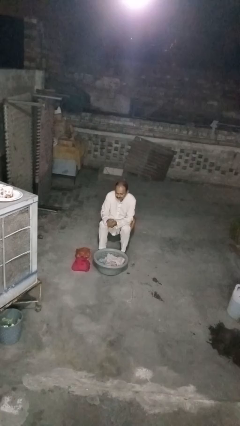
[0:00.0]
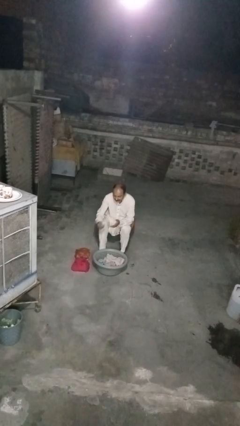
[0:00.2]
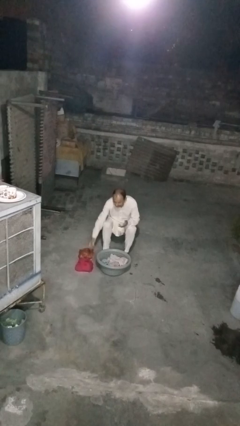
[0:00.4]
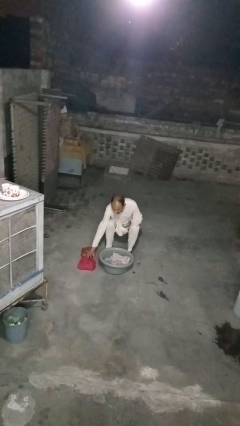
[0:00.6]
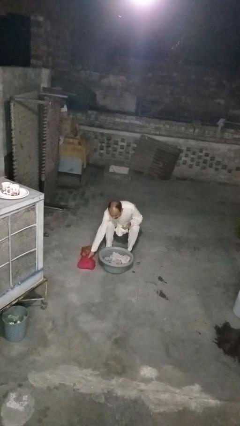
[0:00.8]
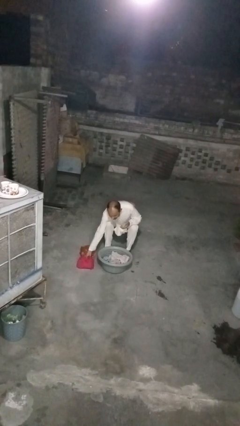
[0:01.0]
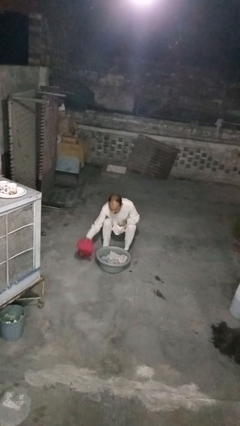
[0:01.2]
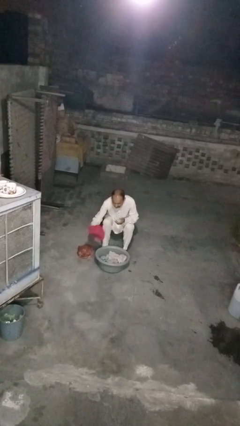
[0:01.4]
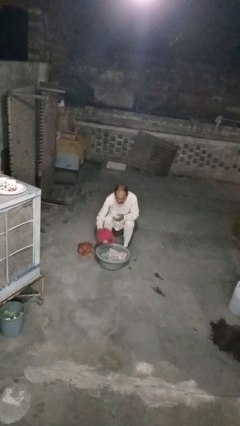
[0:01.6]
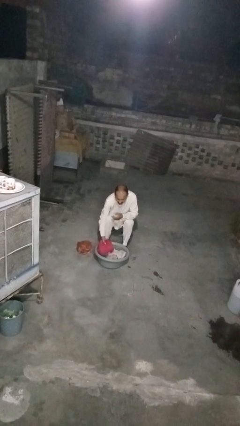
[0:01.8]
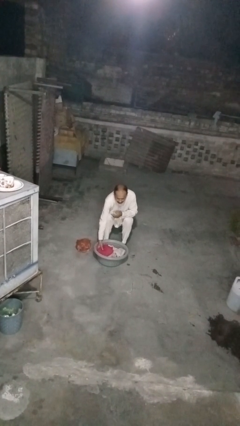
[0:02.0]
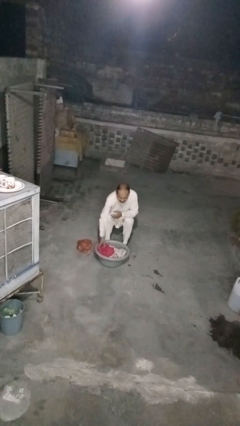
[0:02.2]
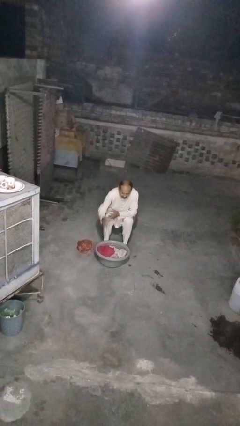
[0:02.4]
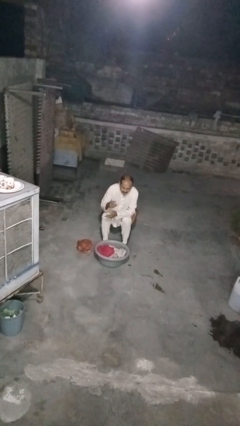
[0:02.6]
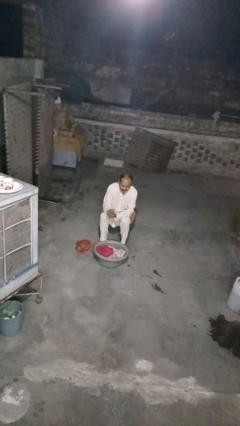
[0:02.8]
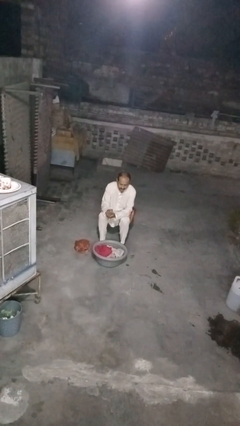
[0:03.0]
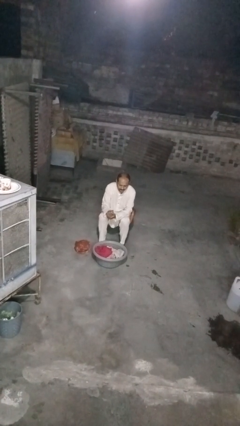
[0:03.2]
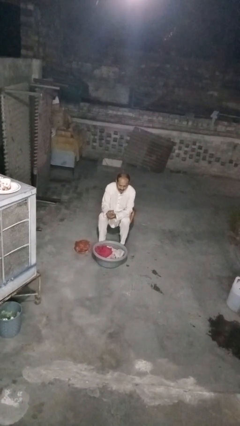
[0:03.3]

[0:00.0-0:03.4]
person puts object into basket

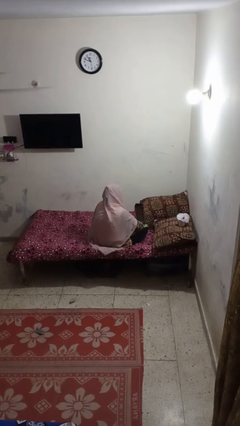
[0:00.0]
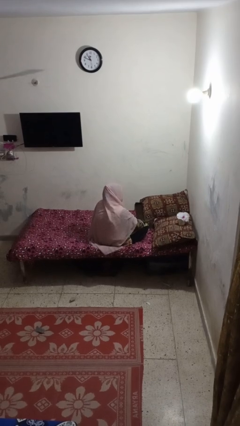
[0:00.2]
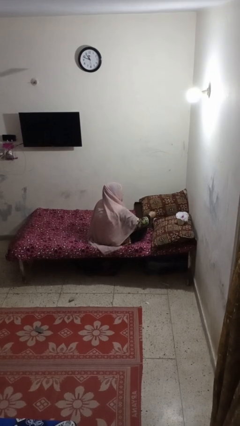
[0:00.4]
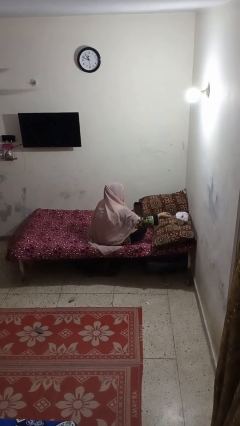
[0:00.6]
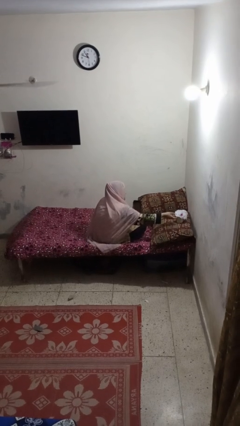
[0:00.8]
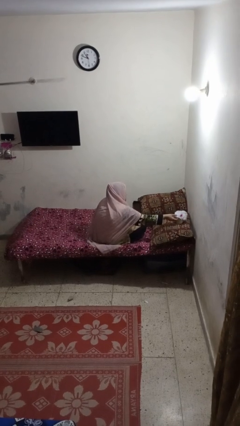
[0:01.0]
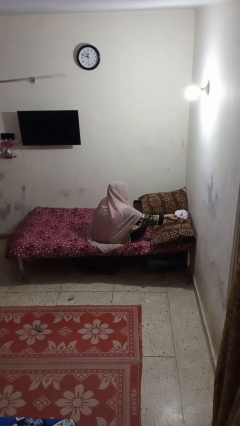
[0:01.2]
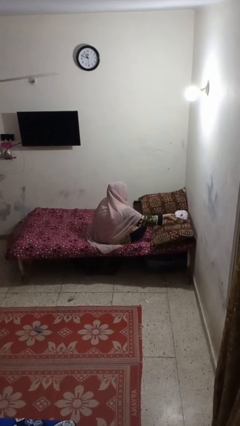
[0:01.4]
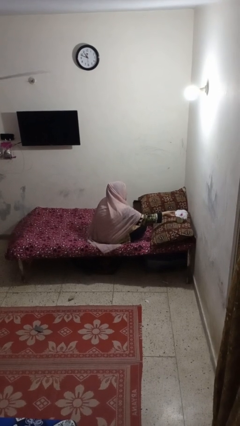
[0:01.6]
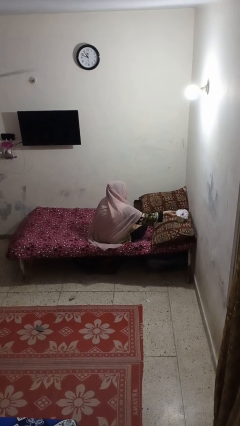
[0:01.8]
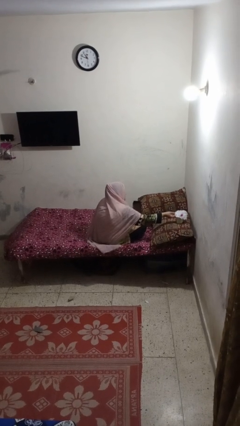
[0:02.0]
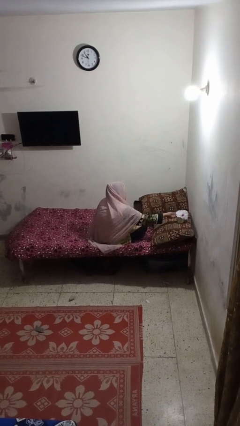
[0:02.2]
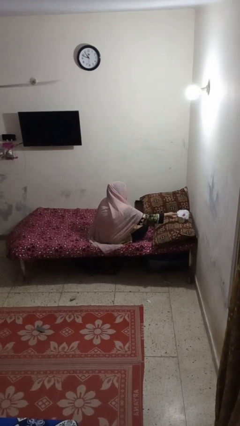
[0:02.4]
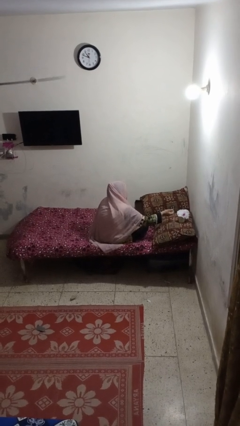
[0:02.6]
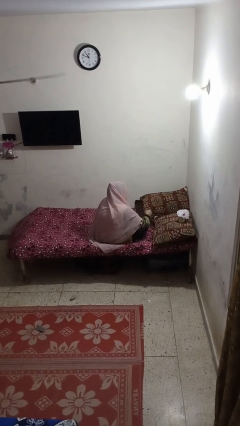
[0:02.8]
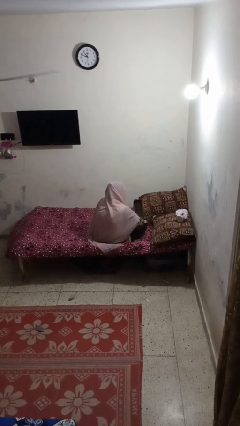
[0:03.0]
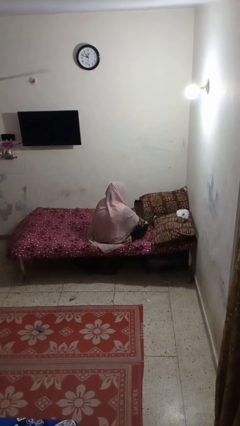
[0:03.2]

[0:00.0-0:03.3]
person arranges flowers in vase

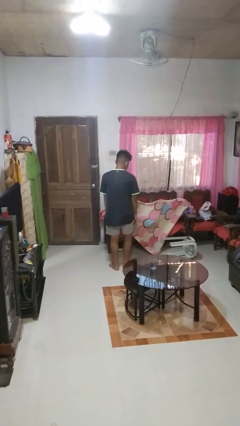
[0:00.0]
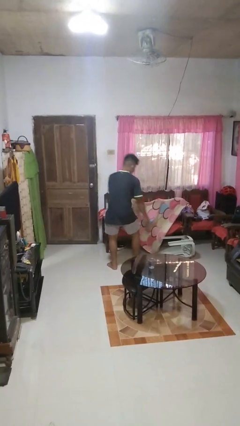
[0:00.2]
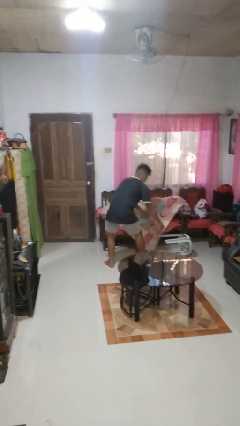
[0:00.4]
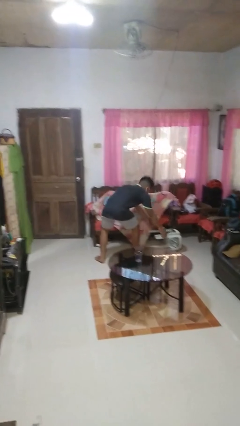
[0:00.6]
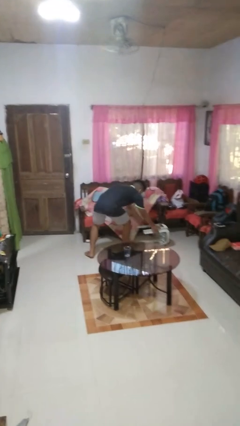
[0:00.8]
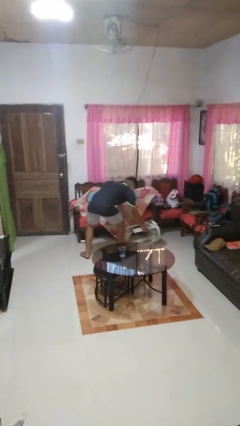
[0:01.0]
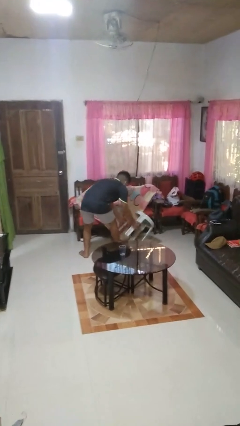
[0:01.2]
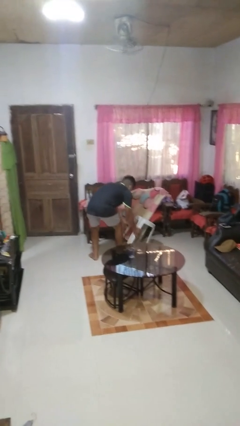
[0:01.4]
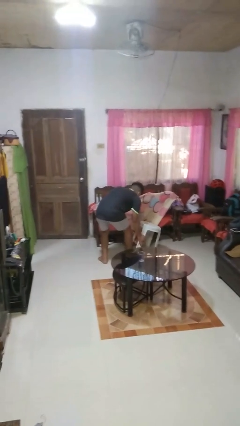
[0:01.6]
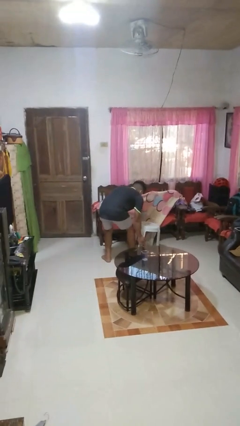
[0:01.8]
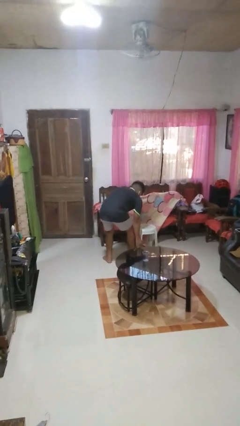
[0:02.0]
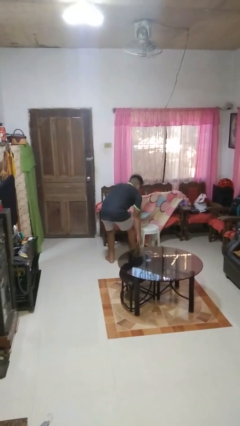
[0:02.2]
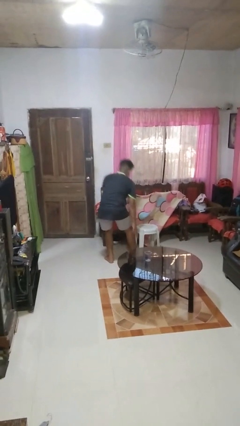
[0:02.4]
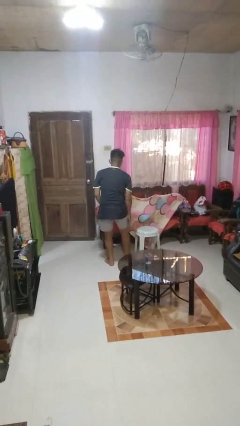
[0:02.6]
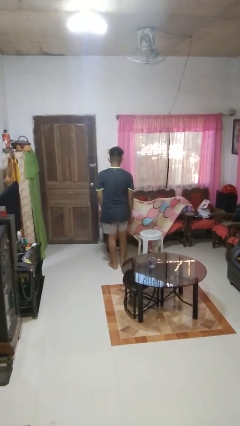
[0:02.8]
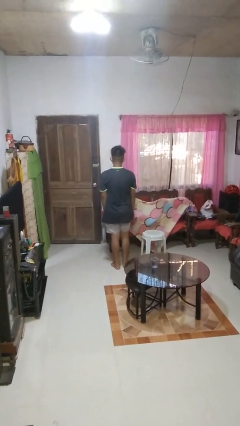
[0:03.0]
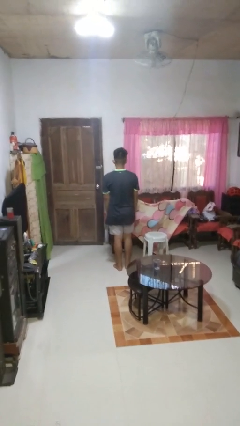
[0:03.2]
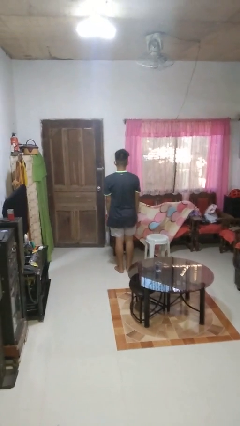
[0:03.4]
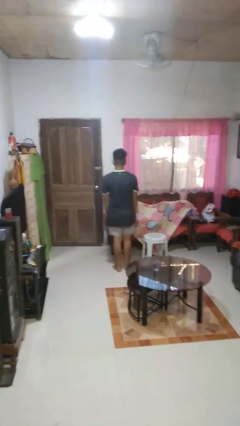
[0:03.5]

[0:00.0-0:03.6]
person sets upright furniture

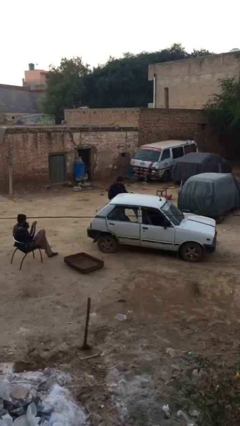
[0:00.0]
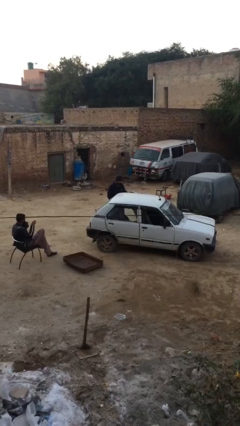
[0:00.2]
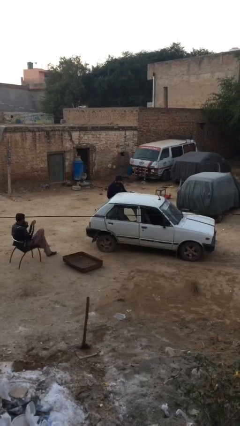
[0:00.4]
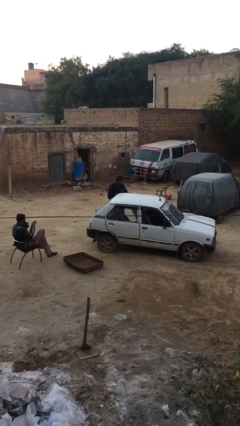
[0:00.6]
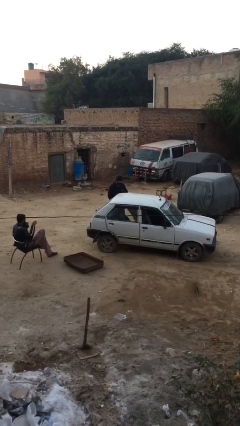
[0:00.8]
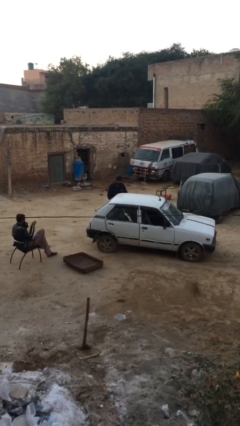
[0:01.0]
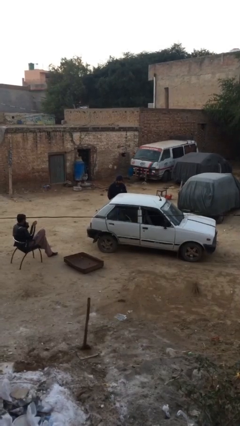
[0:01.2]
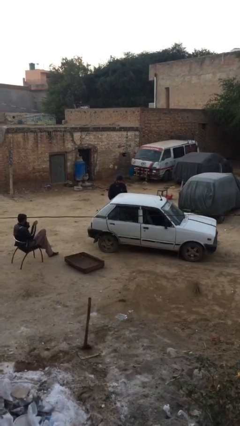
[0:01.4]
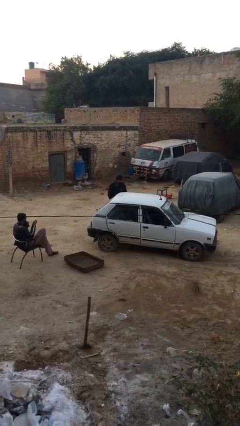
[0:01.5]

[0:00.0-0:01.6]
person closes car door

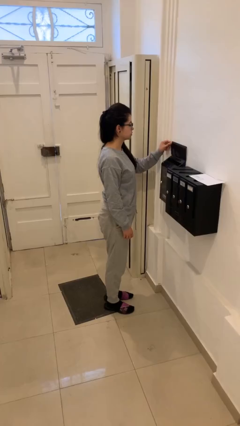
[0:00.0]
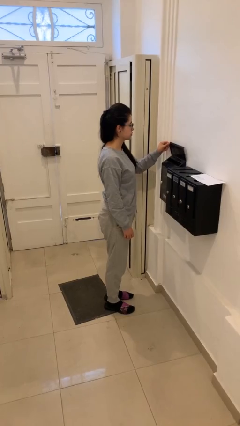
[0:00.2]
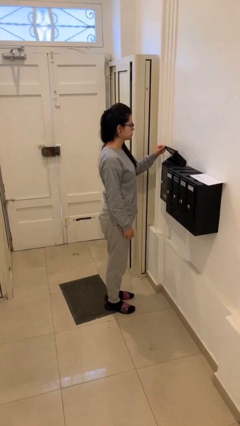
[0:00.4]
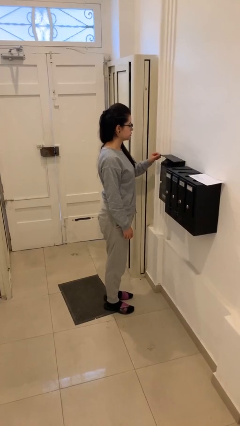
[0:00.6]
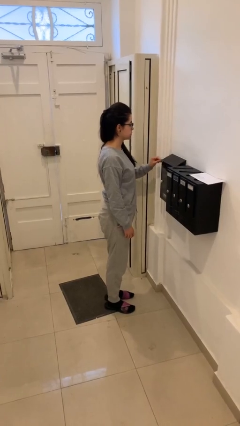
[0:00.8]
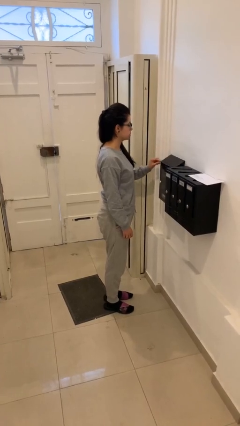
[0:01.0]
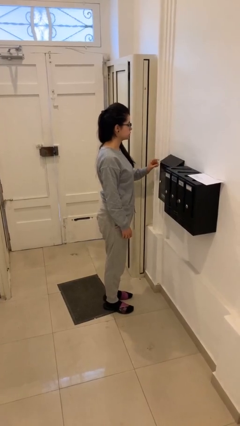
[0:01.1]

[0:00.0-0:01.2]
person closes mailbox

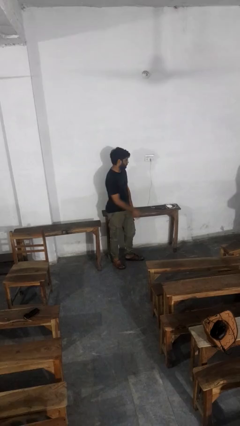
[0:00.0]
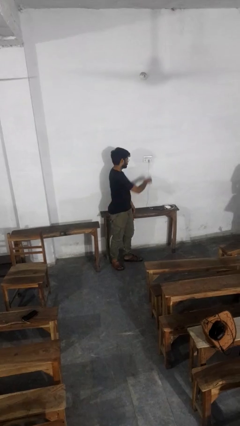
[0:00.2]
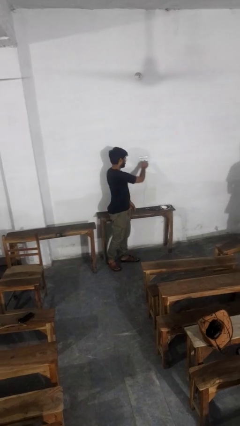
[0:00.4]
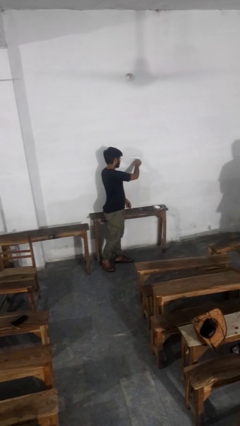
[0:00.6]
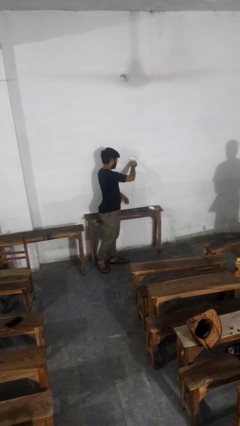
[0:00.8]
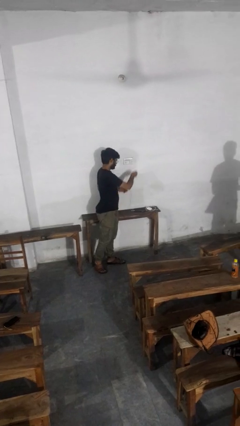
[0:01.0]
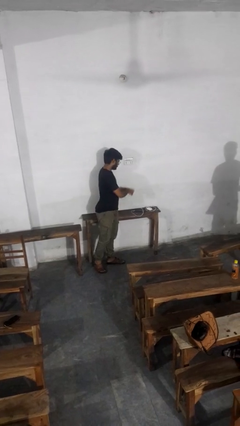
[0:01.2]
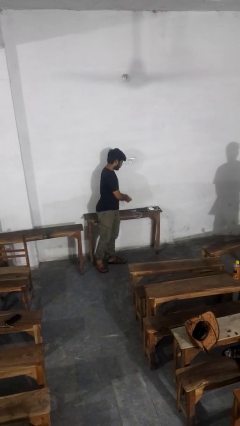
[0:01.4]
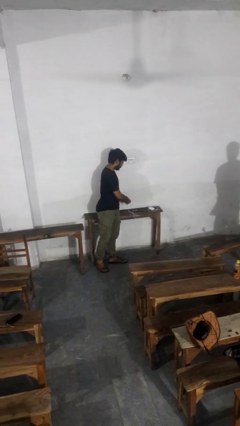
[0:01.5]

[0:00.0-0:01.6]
person unplugs from electrical socket

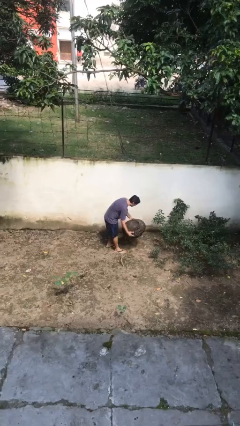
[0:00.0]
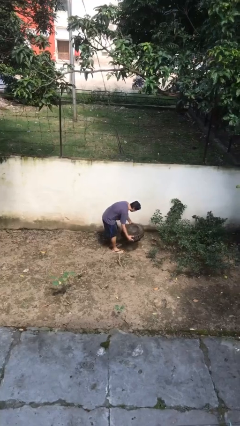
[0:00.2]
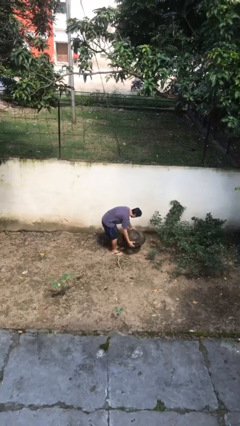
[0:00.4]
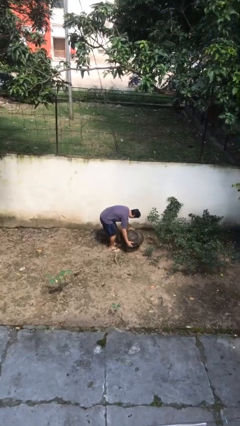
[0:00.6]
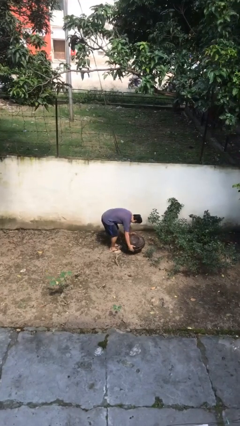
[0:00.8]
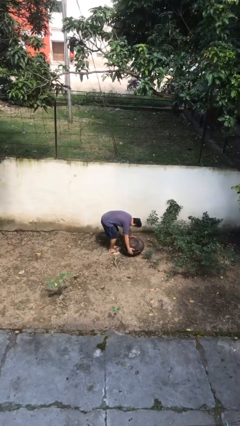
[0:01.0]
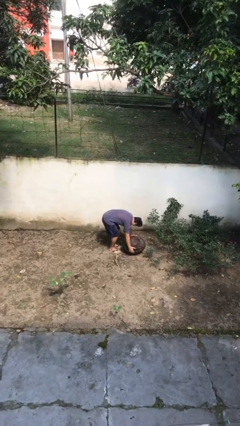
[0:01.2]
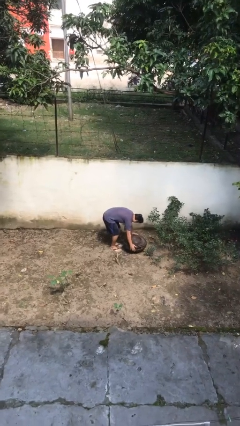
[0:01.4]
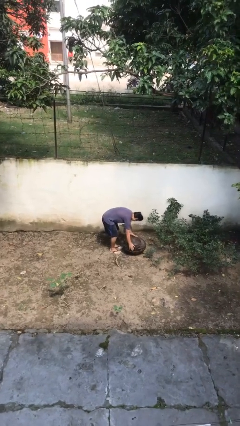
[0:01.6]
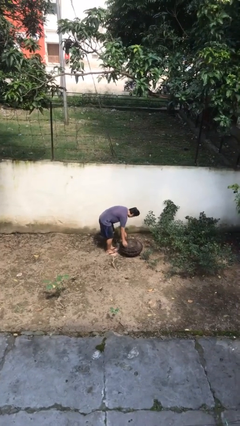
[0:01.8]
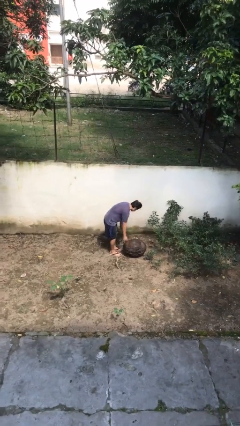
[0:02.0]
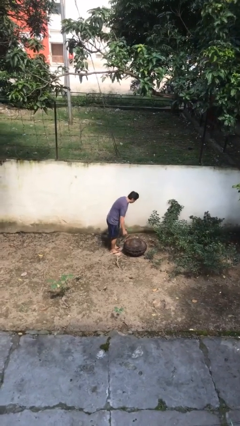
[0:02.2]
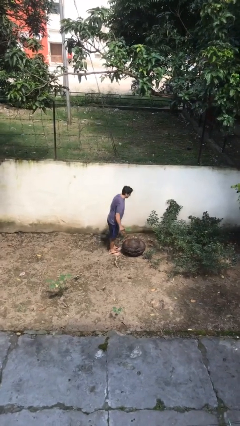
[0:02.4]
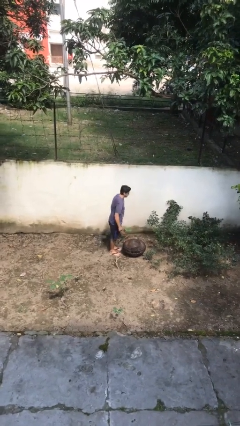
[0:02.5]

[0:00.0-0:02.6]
person puts down object on floor
